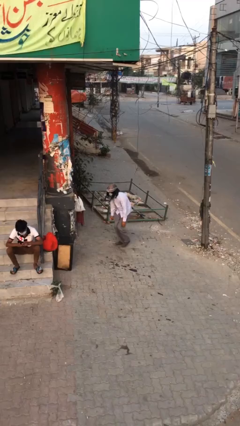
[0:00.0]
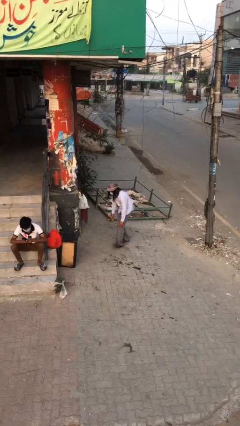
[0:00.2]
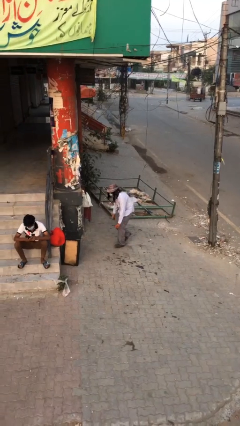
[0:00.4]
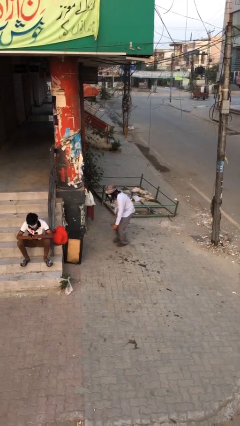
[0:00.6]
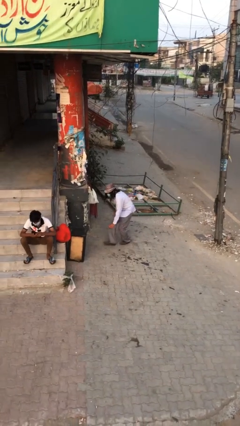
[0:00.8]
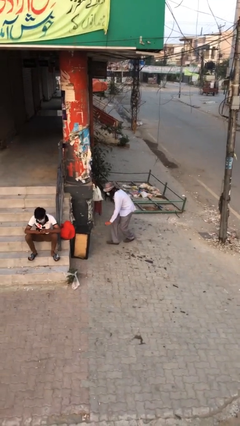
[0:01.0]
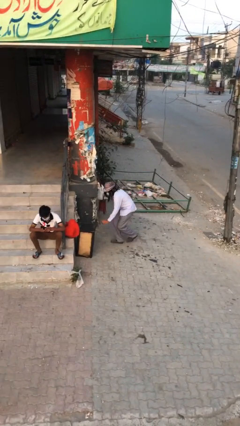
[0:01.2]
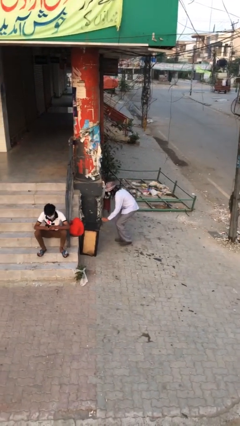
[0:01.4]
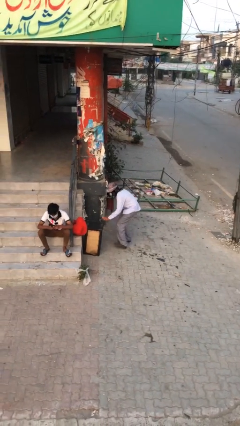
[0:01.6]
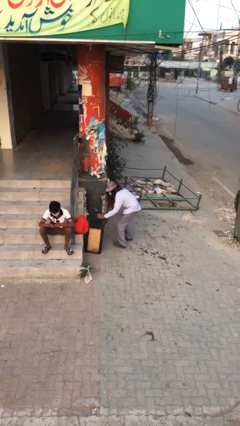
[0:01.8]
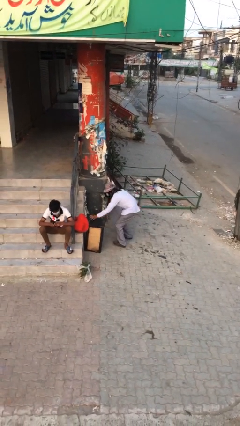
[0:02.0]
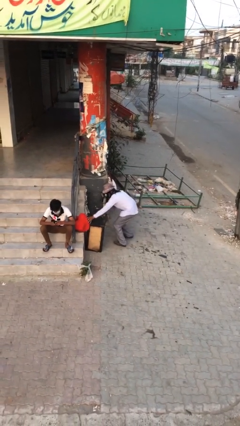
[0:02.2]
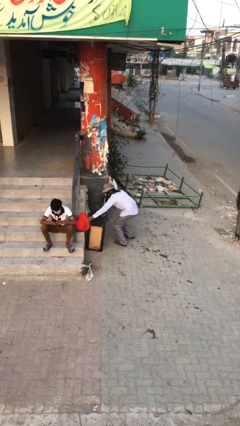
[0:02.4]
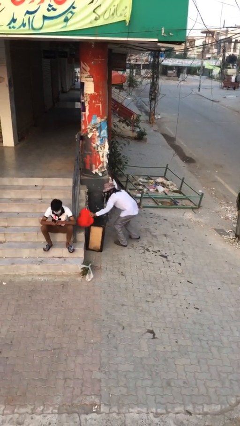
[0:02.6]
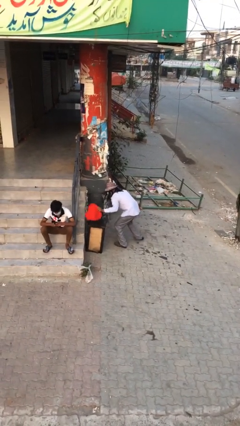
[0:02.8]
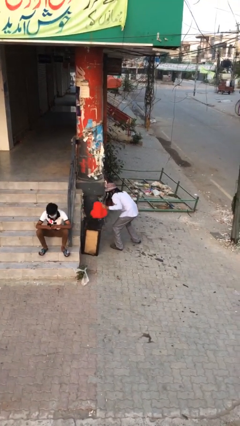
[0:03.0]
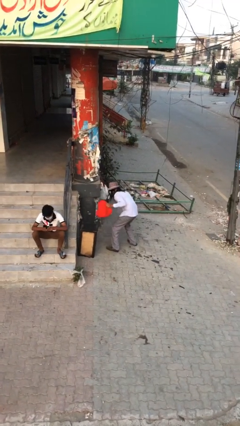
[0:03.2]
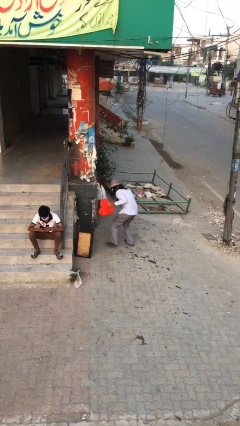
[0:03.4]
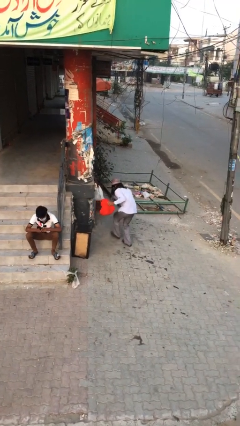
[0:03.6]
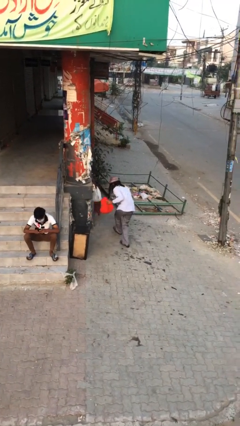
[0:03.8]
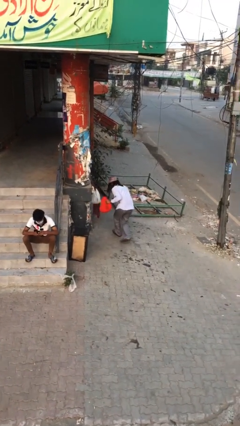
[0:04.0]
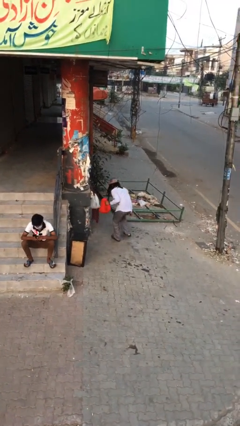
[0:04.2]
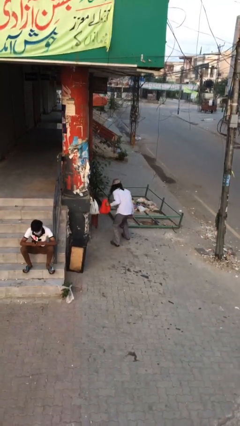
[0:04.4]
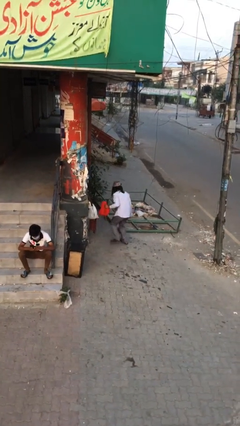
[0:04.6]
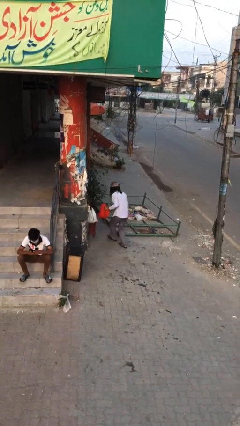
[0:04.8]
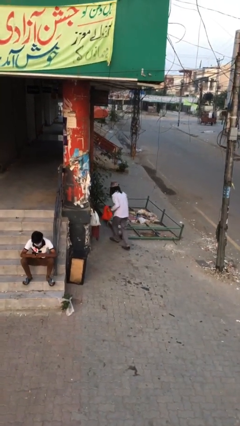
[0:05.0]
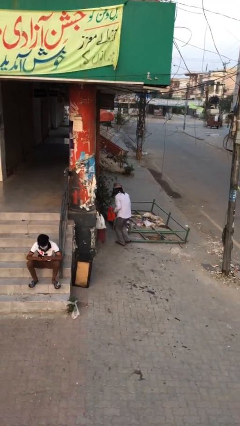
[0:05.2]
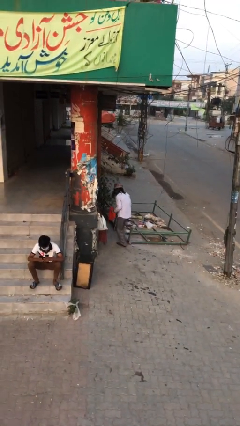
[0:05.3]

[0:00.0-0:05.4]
person steals object from person

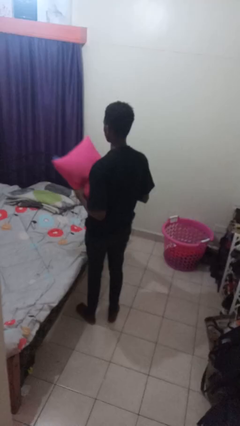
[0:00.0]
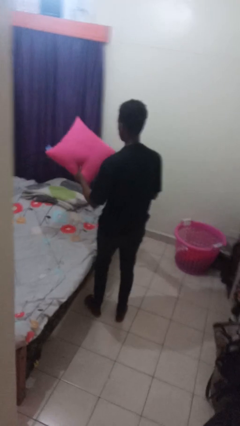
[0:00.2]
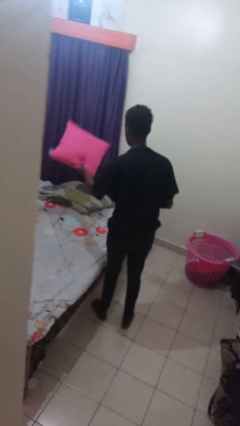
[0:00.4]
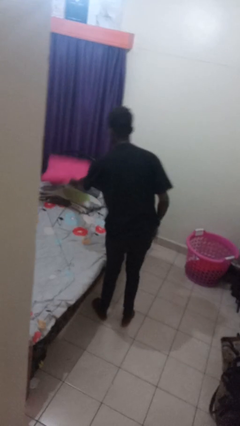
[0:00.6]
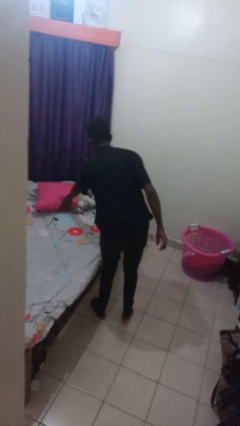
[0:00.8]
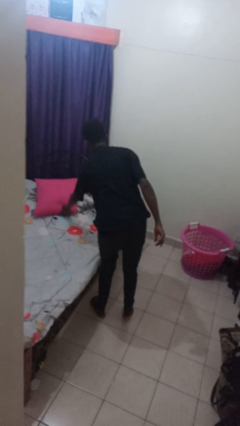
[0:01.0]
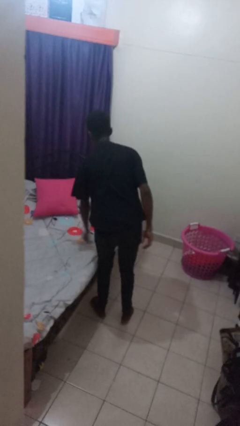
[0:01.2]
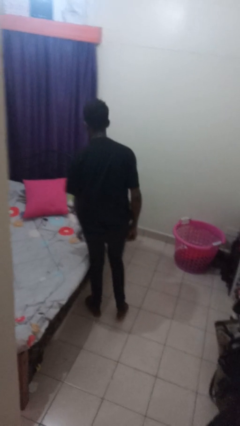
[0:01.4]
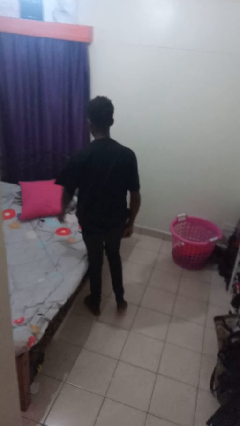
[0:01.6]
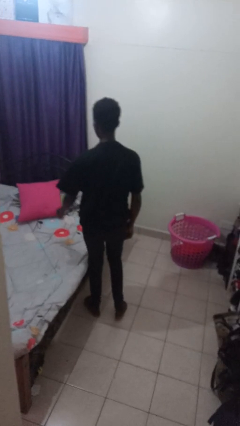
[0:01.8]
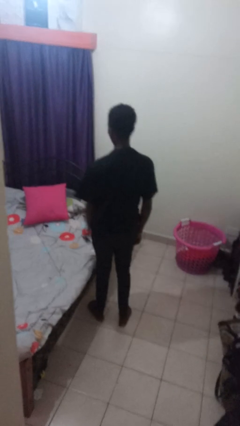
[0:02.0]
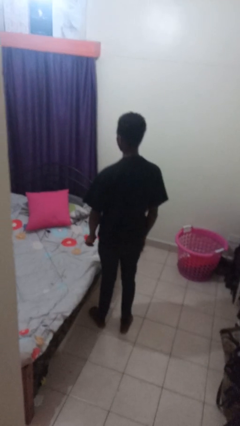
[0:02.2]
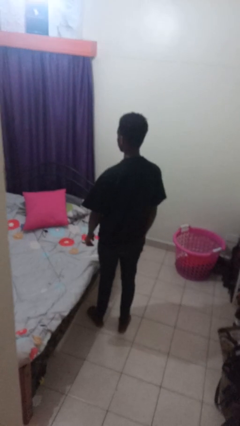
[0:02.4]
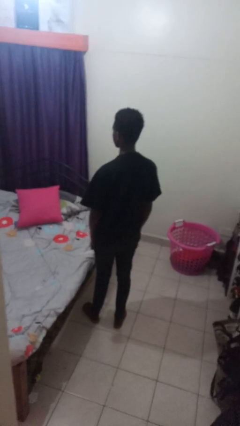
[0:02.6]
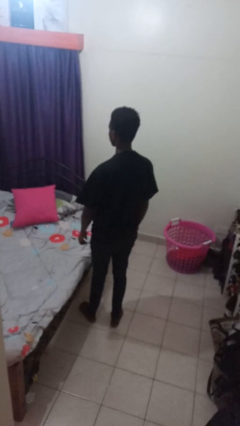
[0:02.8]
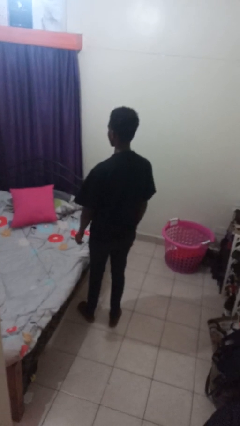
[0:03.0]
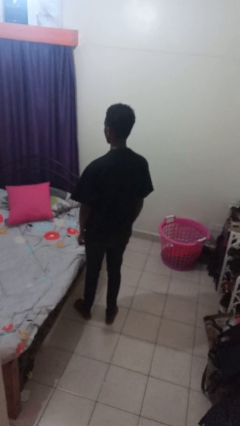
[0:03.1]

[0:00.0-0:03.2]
person puts down object on bed

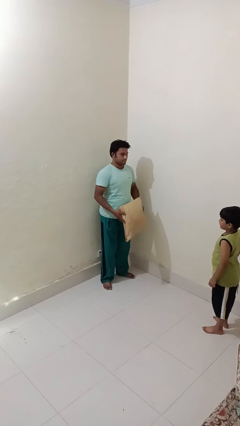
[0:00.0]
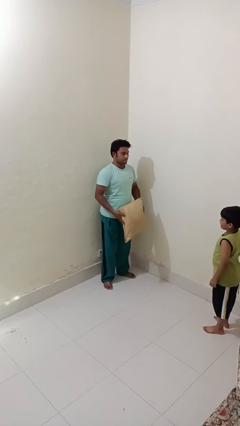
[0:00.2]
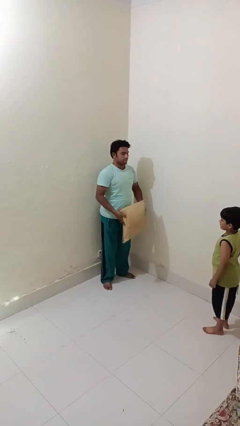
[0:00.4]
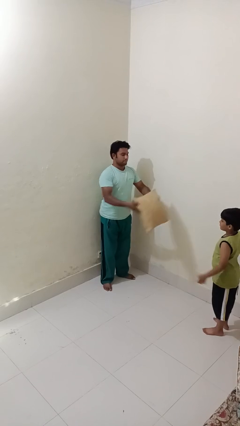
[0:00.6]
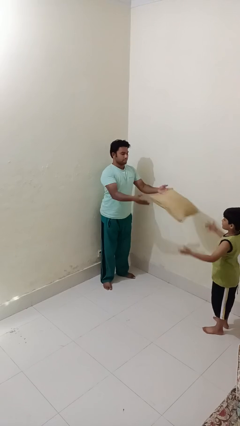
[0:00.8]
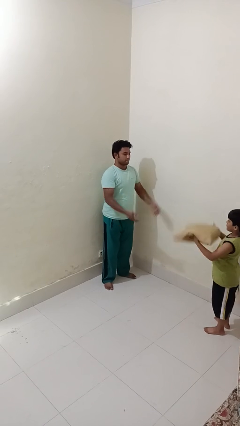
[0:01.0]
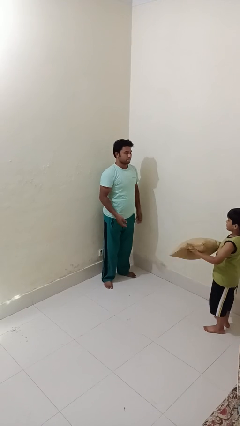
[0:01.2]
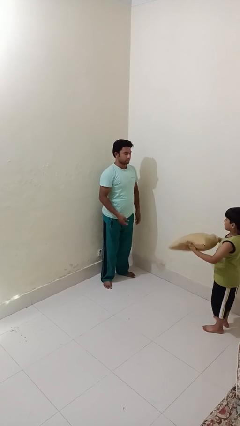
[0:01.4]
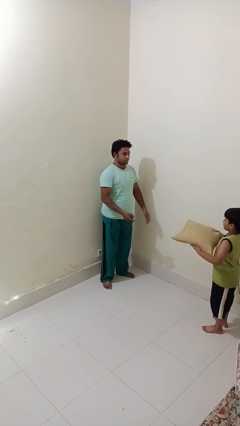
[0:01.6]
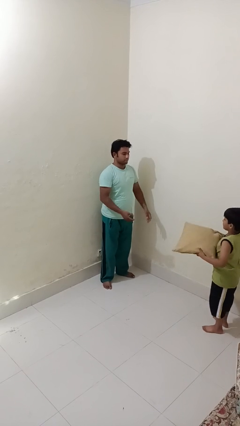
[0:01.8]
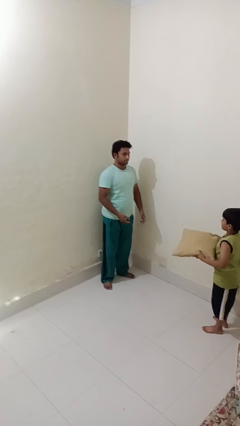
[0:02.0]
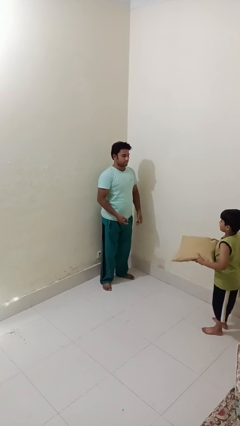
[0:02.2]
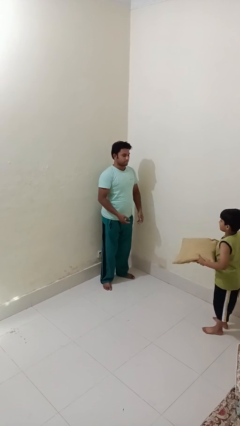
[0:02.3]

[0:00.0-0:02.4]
person throws object to person

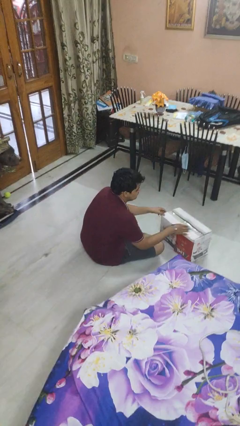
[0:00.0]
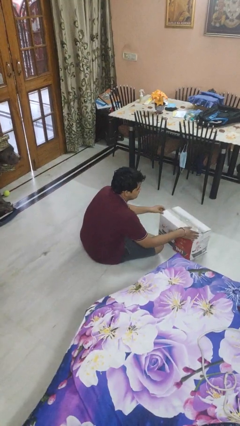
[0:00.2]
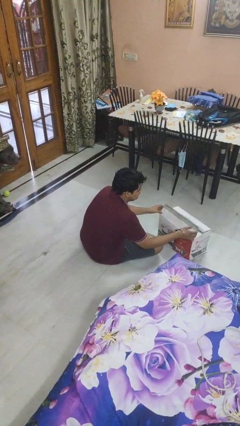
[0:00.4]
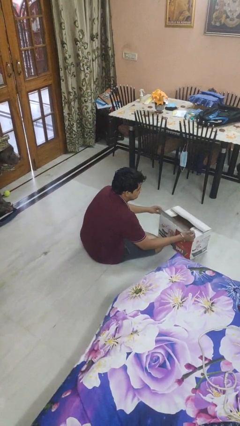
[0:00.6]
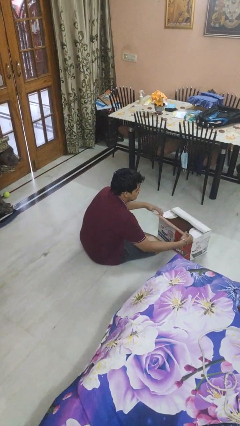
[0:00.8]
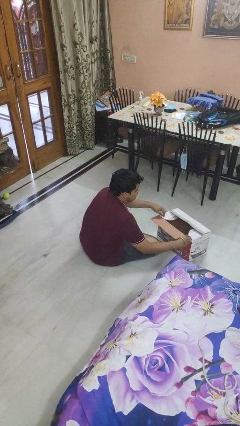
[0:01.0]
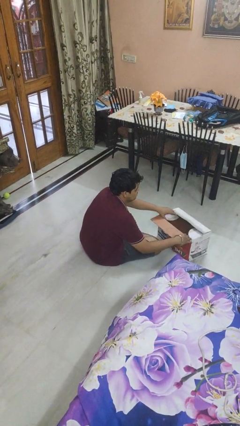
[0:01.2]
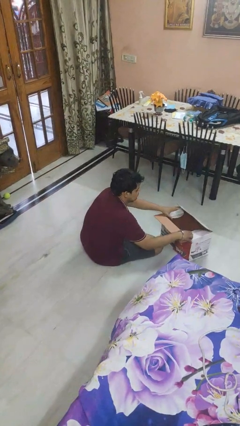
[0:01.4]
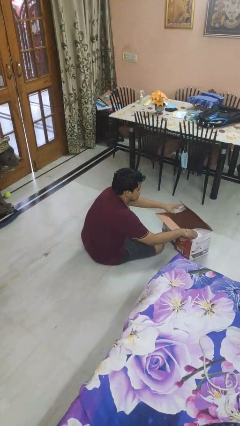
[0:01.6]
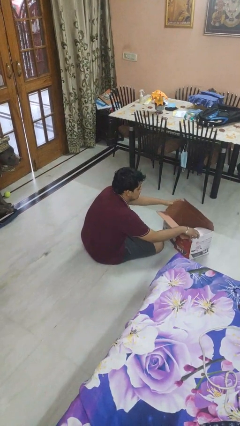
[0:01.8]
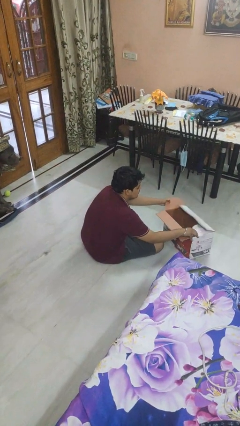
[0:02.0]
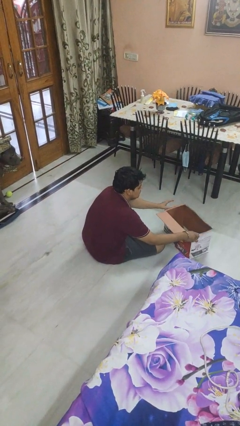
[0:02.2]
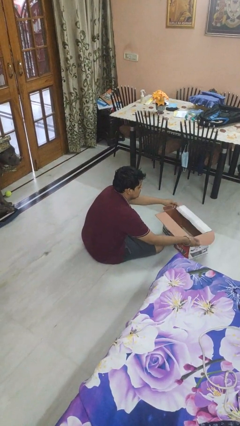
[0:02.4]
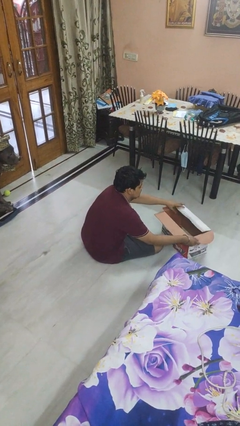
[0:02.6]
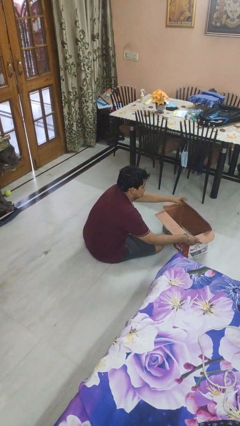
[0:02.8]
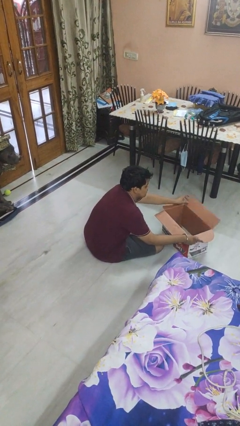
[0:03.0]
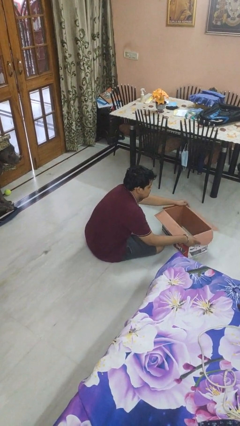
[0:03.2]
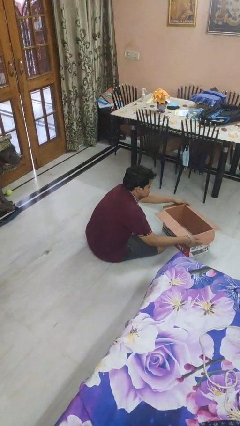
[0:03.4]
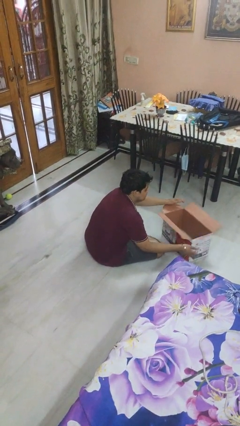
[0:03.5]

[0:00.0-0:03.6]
person opens box

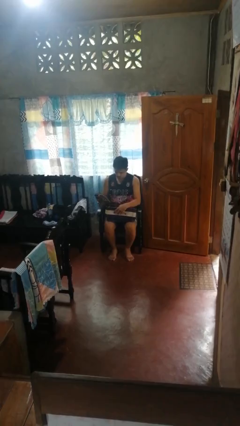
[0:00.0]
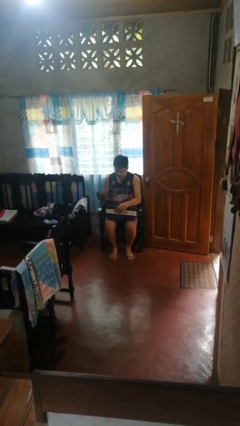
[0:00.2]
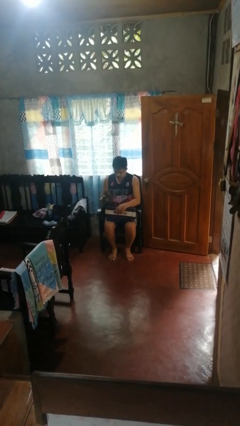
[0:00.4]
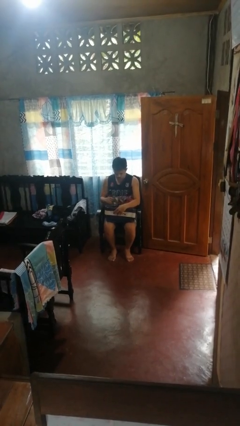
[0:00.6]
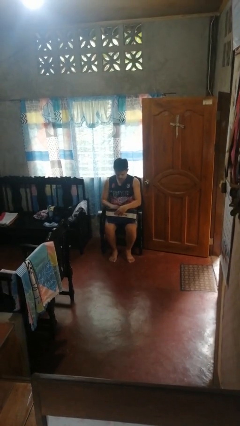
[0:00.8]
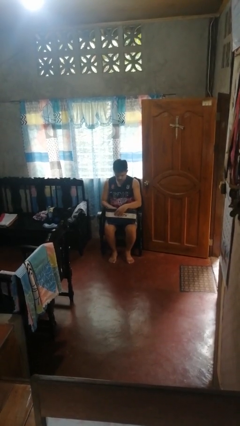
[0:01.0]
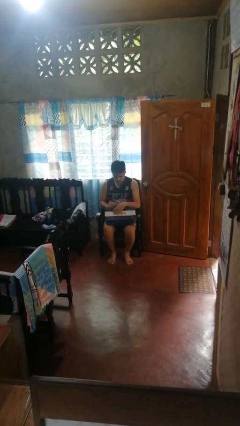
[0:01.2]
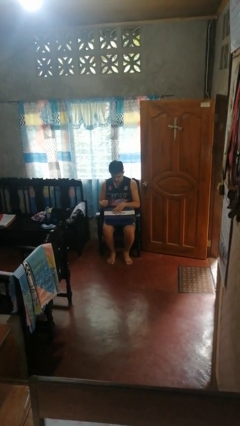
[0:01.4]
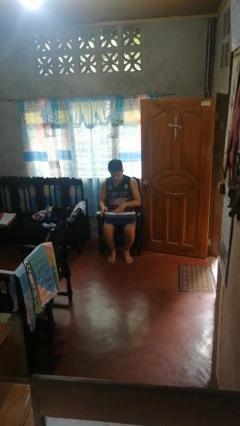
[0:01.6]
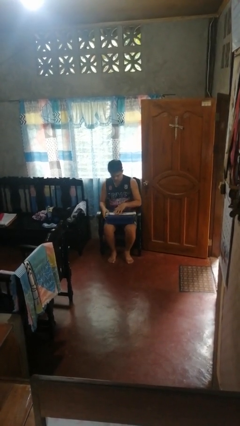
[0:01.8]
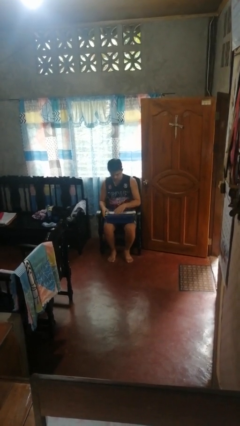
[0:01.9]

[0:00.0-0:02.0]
person puts object into box

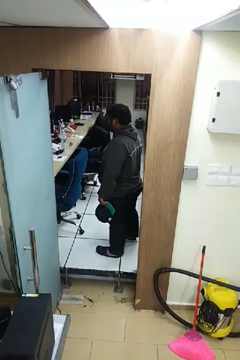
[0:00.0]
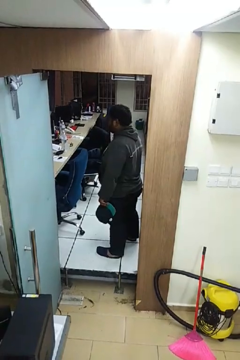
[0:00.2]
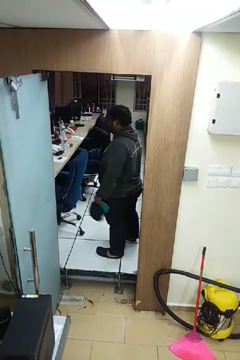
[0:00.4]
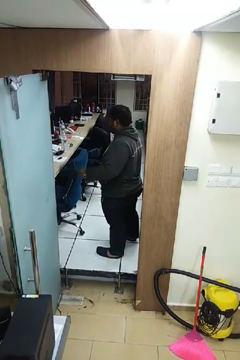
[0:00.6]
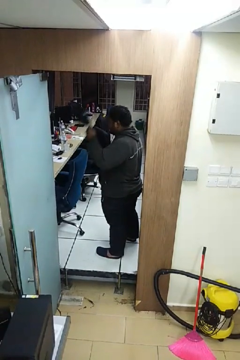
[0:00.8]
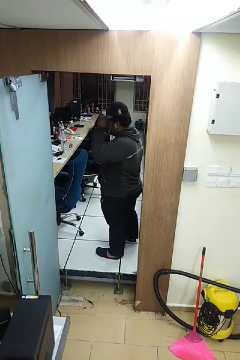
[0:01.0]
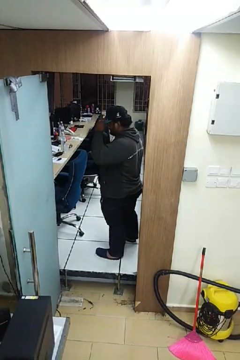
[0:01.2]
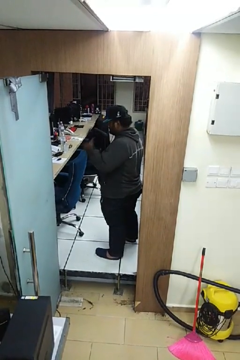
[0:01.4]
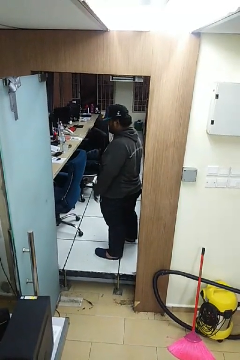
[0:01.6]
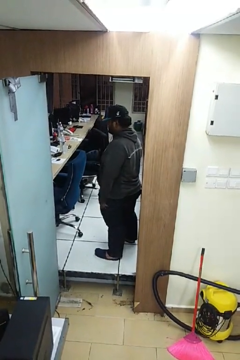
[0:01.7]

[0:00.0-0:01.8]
person puts on hat
